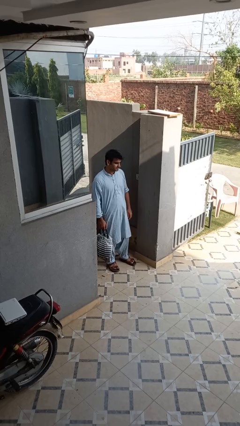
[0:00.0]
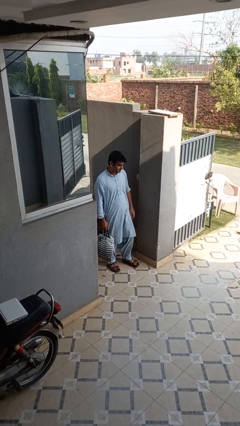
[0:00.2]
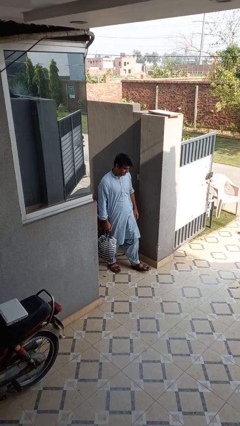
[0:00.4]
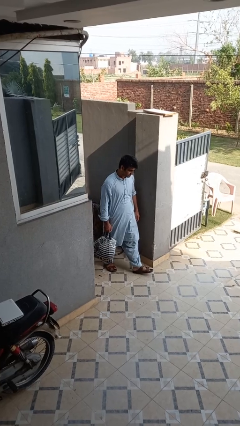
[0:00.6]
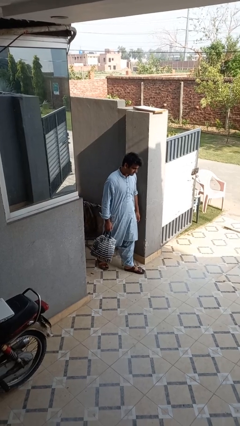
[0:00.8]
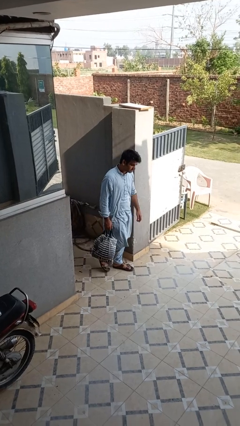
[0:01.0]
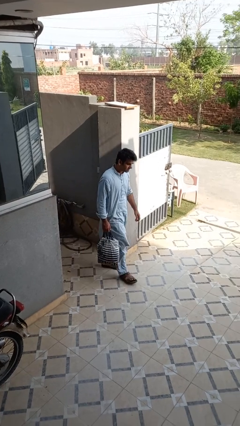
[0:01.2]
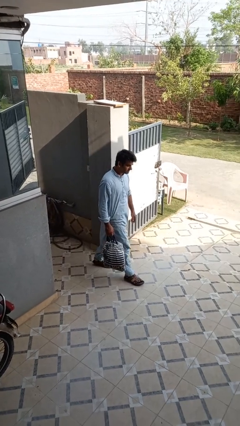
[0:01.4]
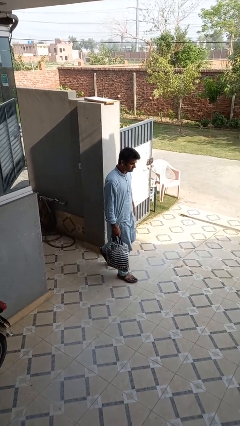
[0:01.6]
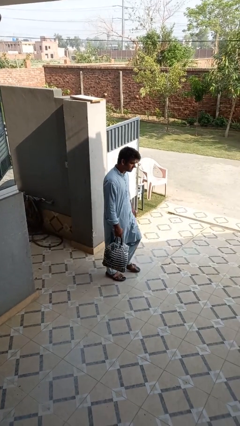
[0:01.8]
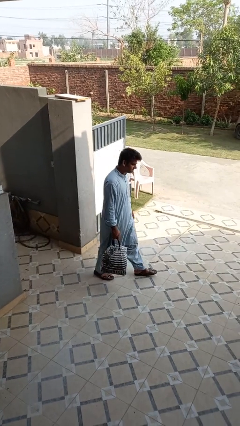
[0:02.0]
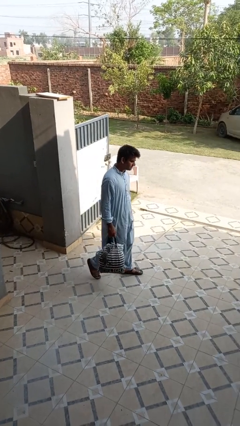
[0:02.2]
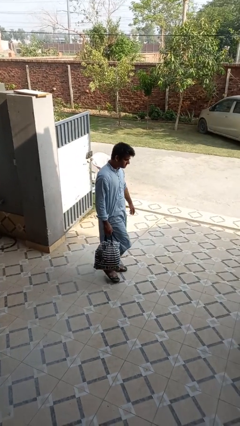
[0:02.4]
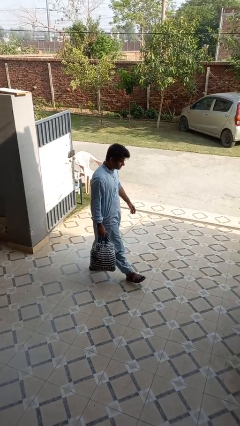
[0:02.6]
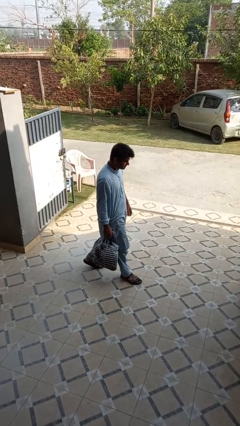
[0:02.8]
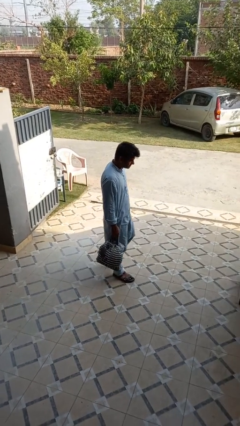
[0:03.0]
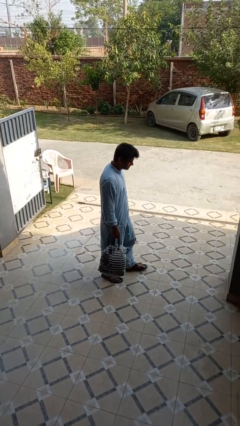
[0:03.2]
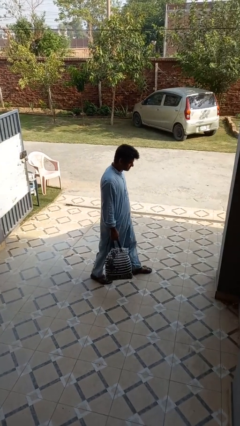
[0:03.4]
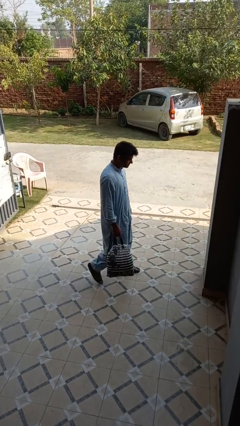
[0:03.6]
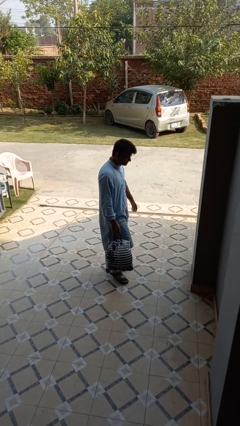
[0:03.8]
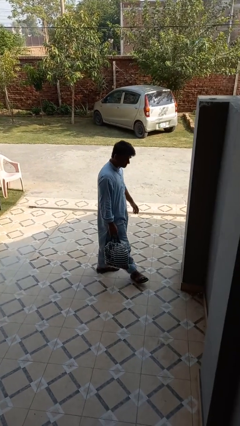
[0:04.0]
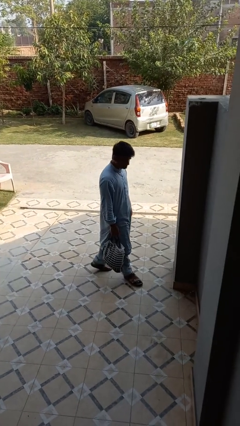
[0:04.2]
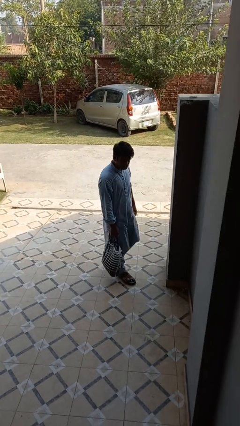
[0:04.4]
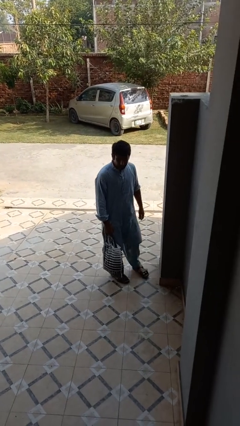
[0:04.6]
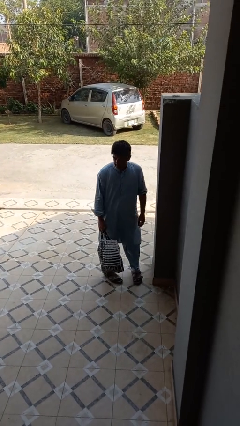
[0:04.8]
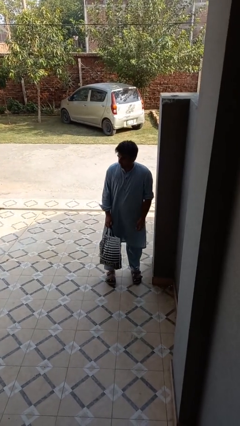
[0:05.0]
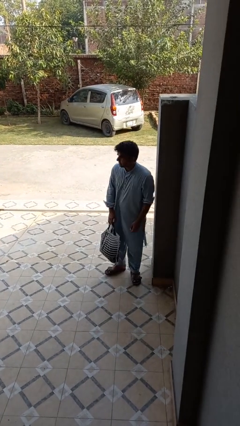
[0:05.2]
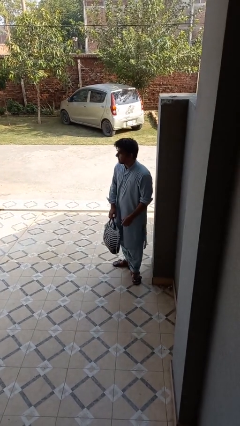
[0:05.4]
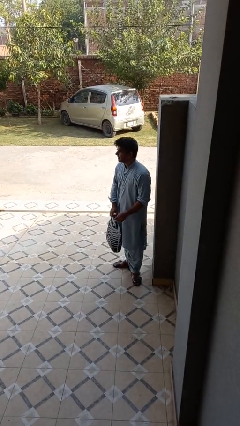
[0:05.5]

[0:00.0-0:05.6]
person carries groceries

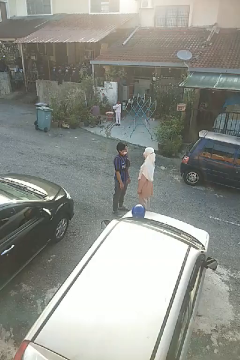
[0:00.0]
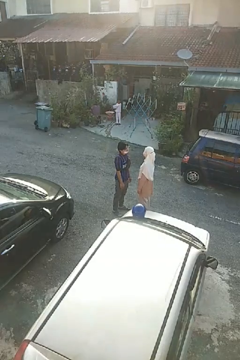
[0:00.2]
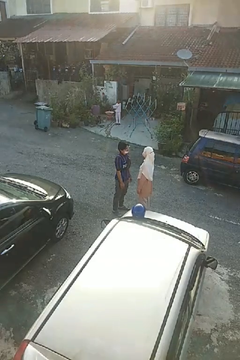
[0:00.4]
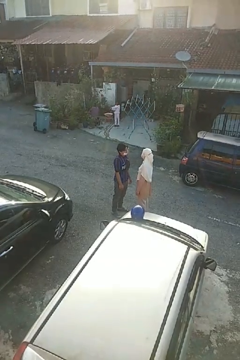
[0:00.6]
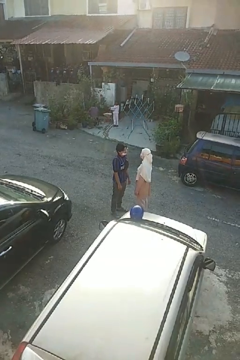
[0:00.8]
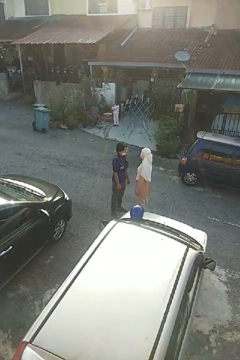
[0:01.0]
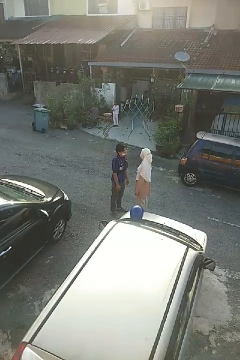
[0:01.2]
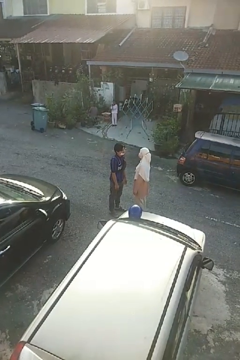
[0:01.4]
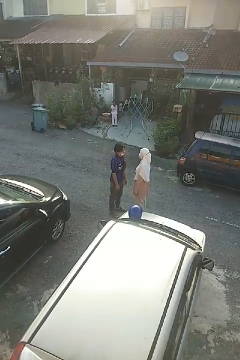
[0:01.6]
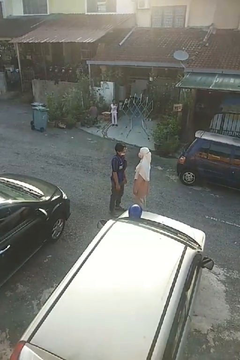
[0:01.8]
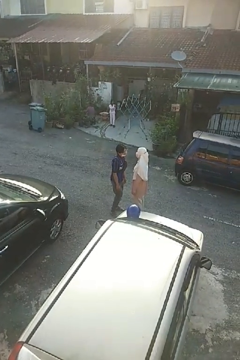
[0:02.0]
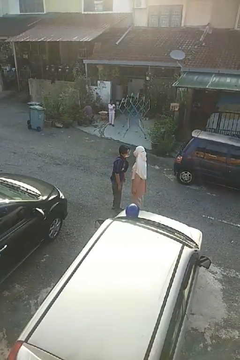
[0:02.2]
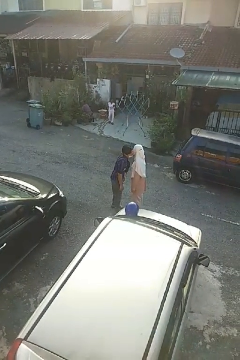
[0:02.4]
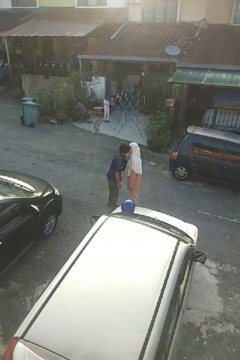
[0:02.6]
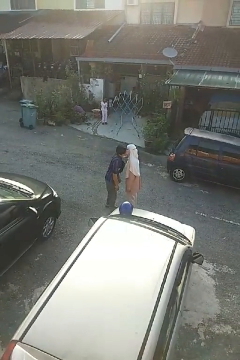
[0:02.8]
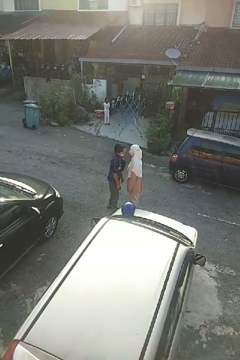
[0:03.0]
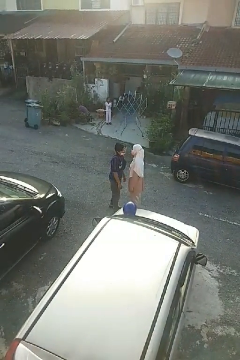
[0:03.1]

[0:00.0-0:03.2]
person kisses cheek of person

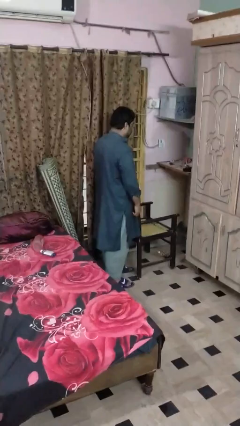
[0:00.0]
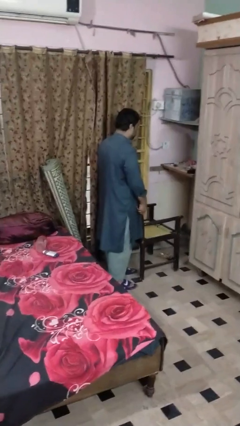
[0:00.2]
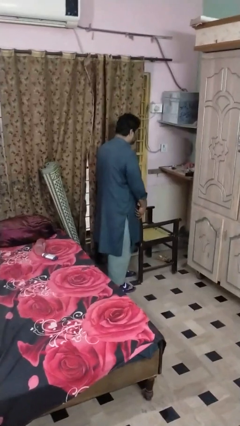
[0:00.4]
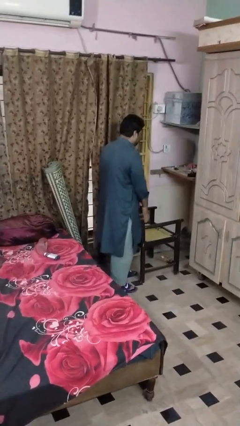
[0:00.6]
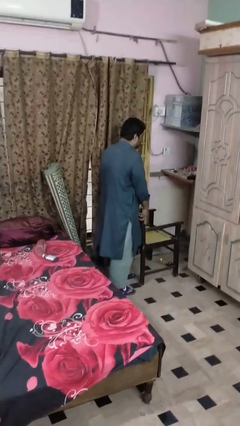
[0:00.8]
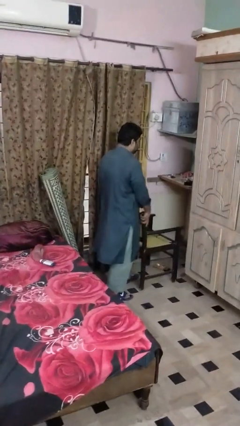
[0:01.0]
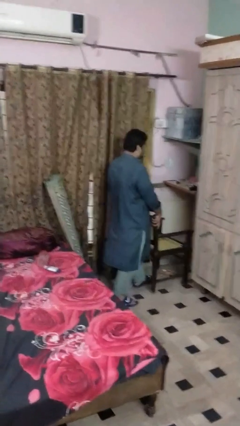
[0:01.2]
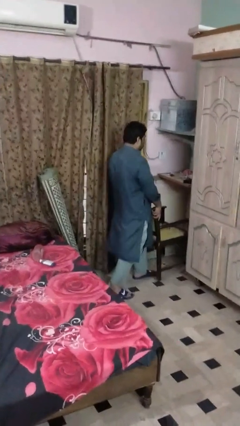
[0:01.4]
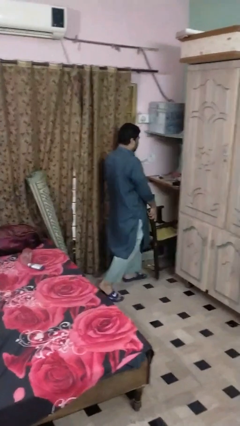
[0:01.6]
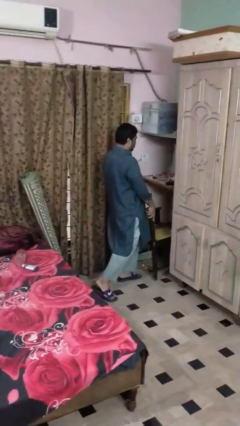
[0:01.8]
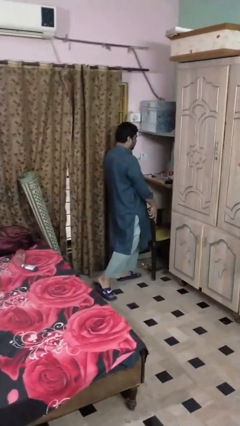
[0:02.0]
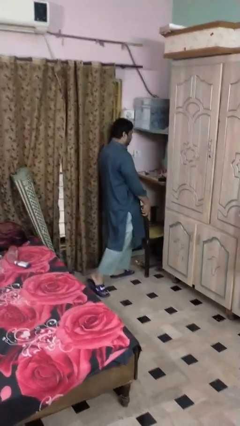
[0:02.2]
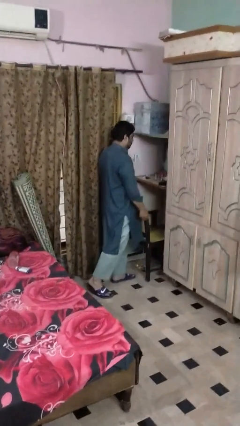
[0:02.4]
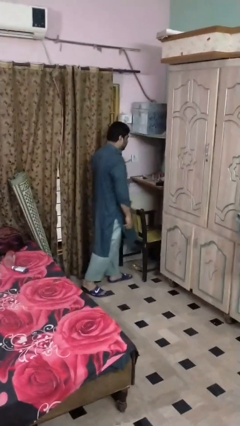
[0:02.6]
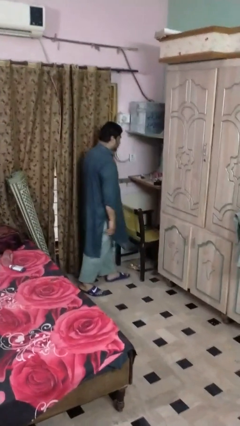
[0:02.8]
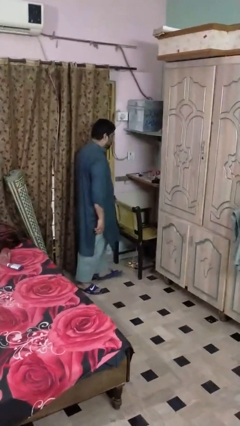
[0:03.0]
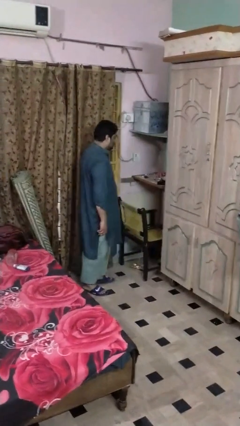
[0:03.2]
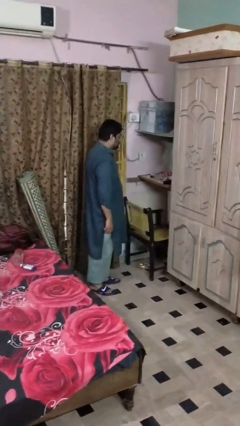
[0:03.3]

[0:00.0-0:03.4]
person pushes in chair

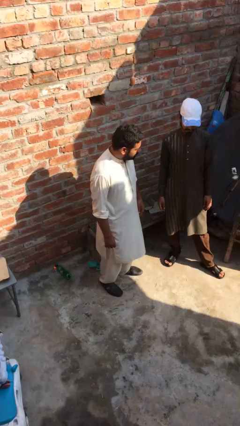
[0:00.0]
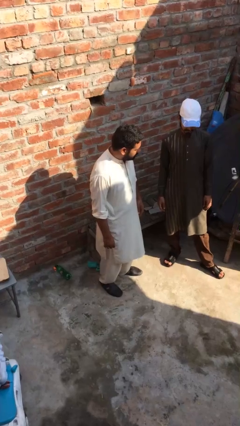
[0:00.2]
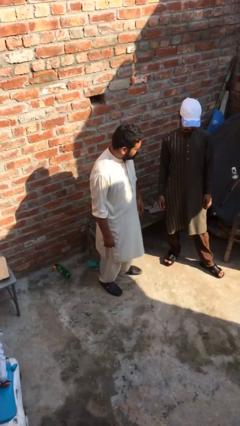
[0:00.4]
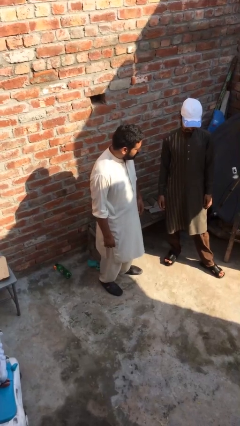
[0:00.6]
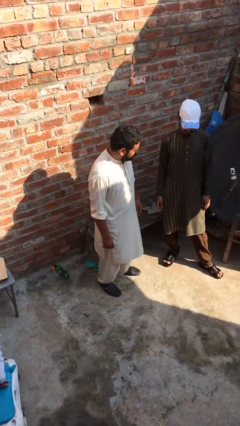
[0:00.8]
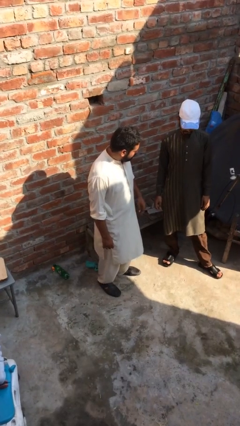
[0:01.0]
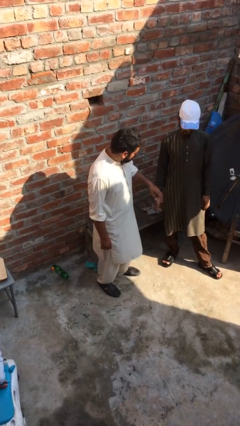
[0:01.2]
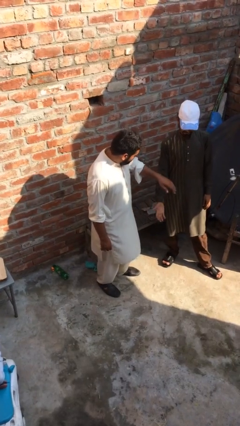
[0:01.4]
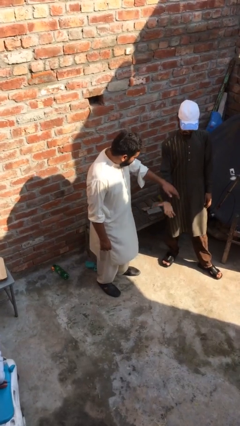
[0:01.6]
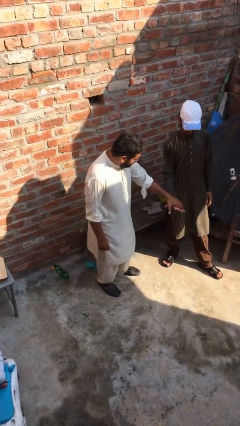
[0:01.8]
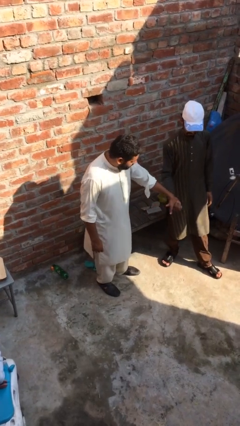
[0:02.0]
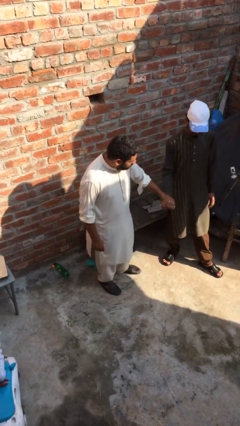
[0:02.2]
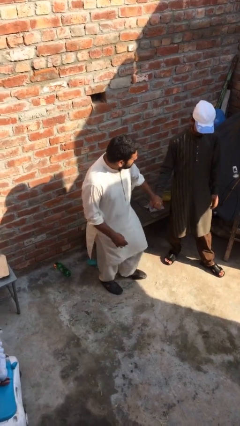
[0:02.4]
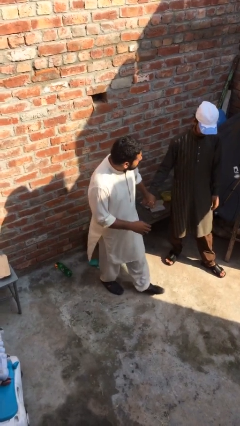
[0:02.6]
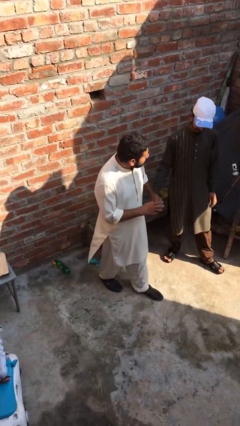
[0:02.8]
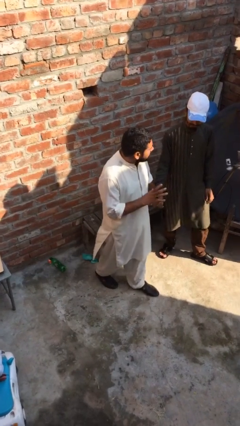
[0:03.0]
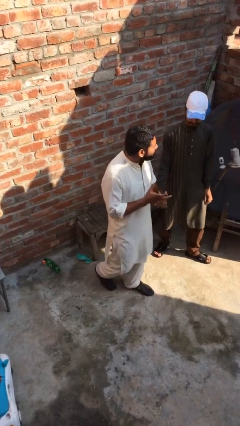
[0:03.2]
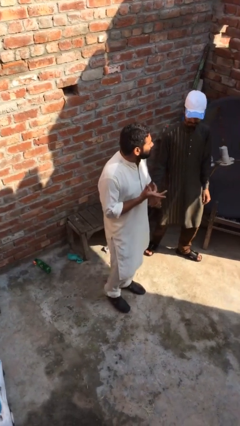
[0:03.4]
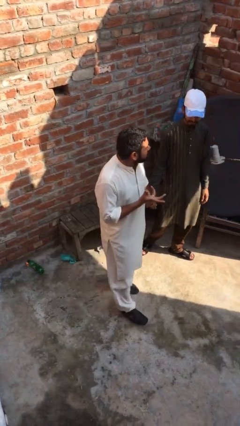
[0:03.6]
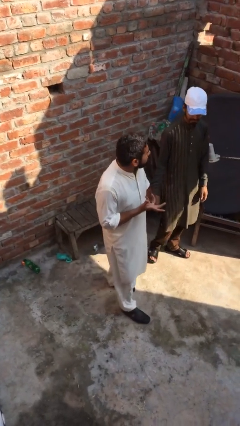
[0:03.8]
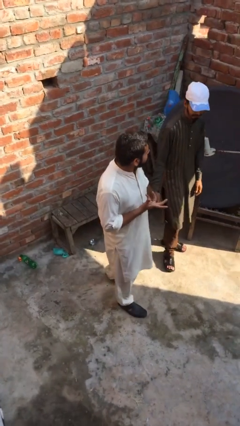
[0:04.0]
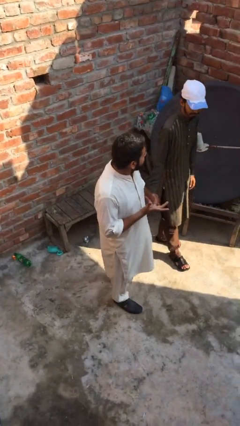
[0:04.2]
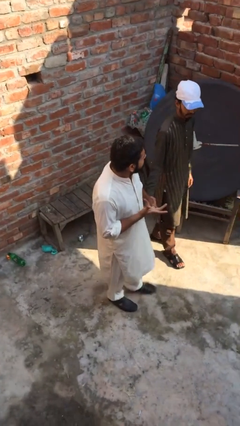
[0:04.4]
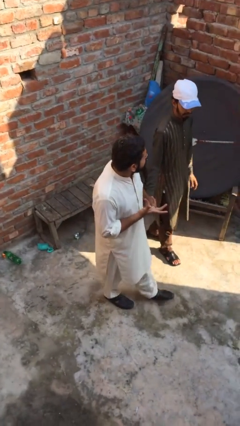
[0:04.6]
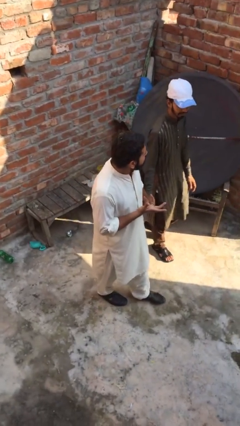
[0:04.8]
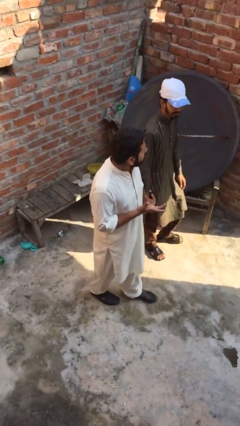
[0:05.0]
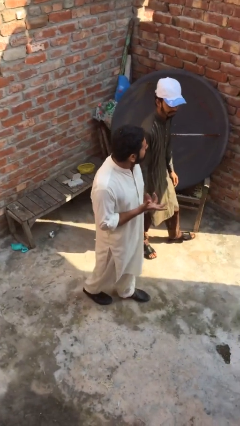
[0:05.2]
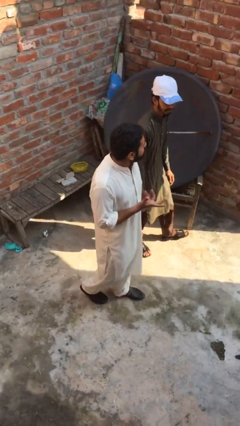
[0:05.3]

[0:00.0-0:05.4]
person holds hand

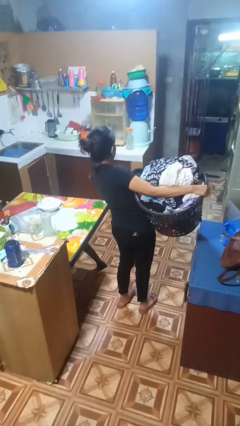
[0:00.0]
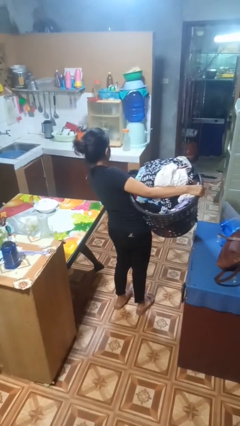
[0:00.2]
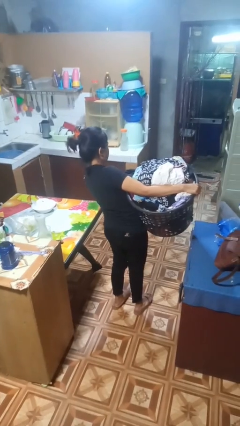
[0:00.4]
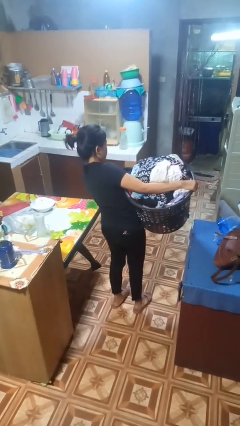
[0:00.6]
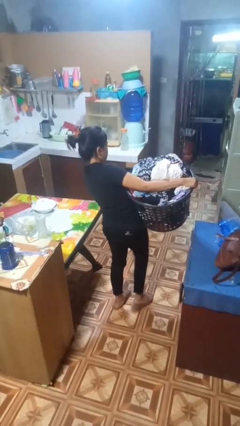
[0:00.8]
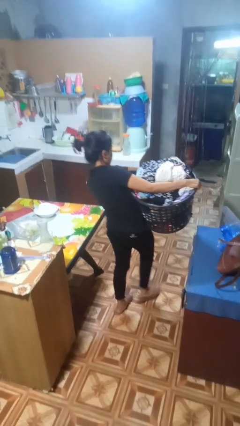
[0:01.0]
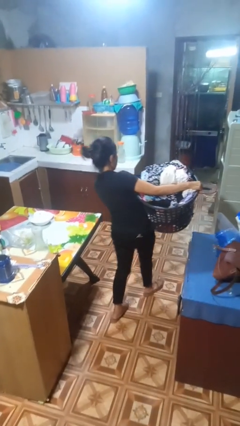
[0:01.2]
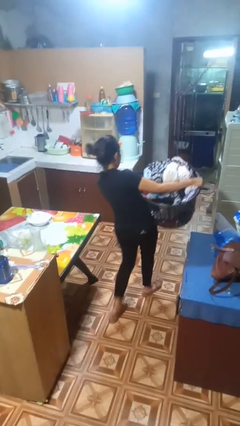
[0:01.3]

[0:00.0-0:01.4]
person carries laundry basket
